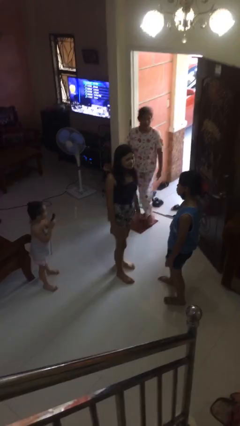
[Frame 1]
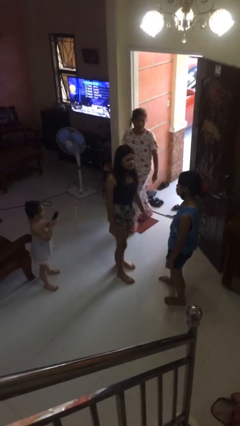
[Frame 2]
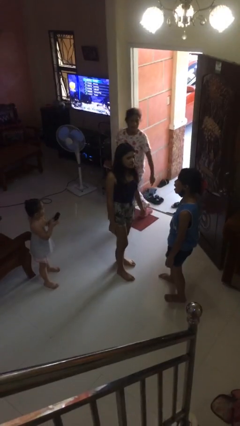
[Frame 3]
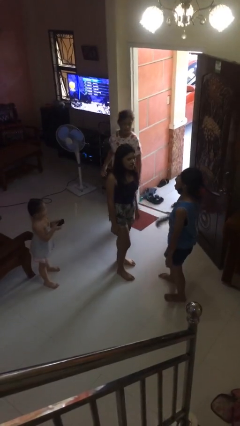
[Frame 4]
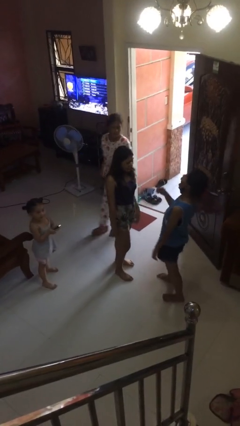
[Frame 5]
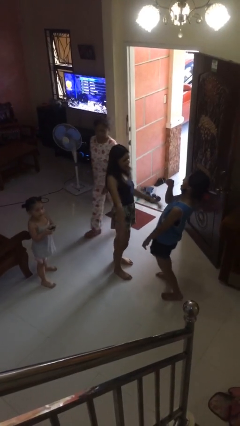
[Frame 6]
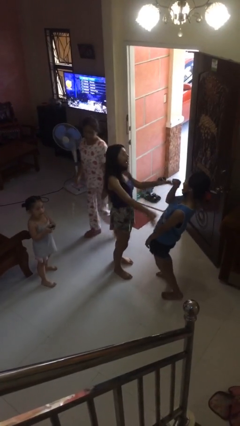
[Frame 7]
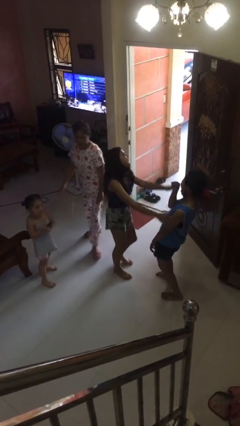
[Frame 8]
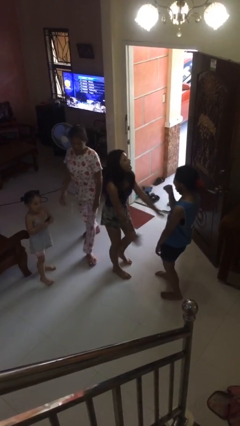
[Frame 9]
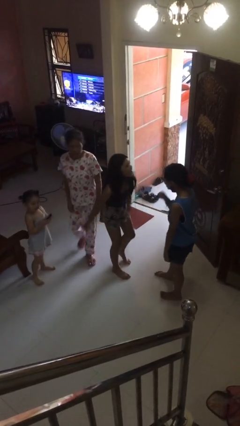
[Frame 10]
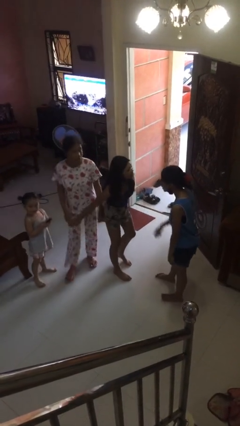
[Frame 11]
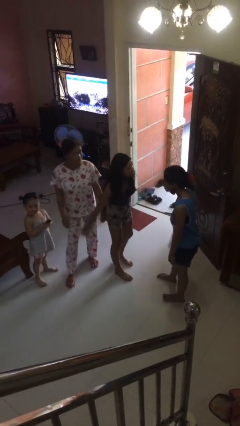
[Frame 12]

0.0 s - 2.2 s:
person laughs with person

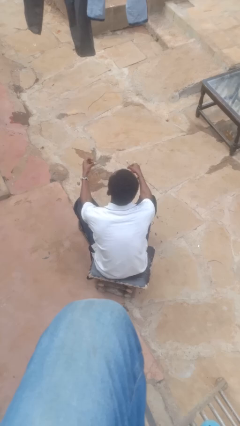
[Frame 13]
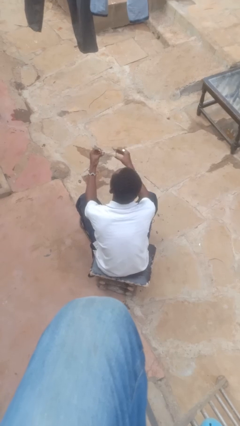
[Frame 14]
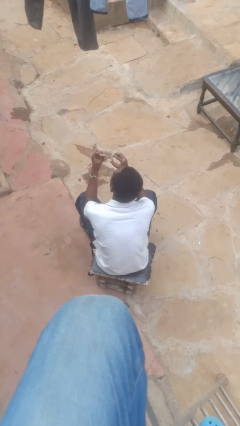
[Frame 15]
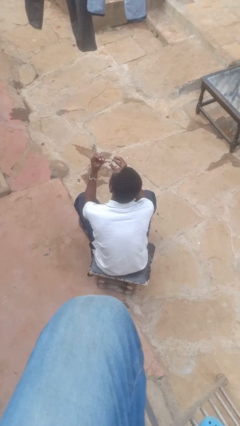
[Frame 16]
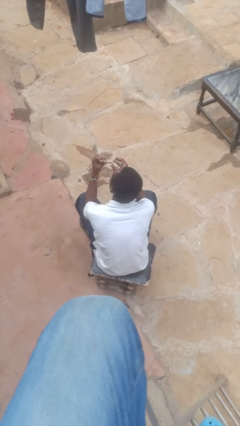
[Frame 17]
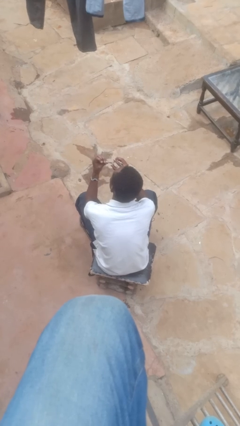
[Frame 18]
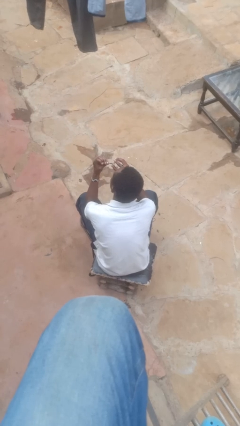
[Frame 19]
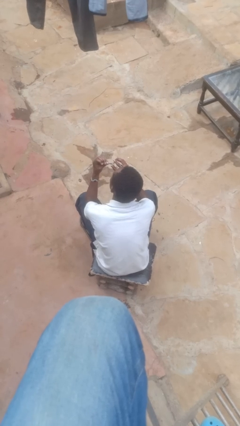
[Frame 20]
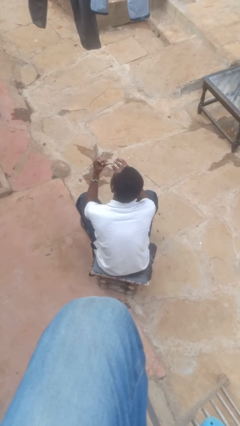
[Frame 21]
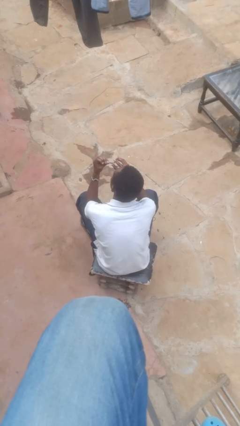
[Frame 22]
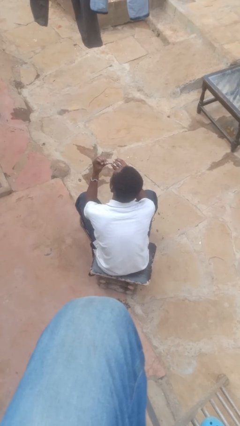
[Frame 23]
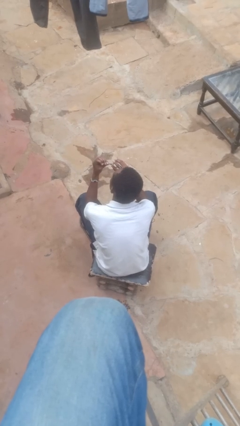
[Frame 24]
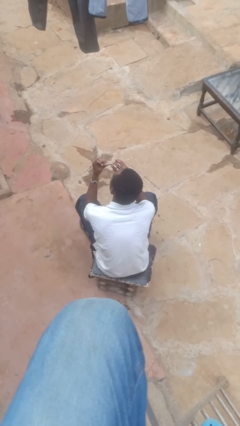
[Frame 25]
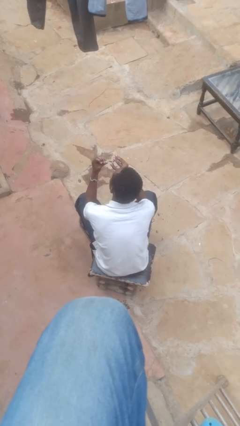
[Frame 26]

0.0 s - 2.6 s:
person clips fingernails

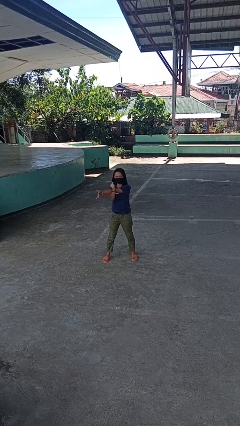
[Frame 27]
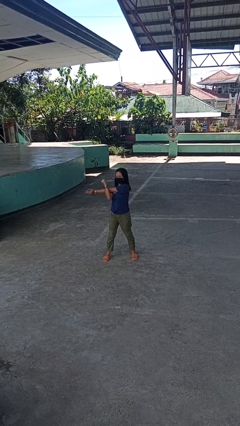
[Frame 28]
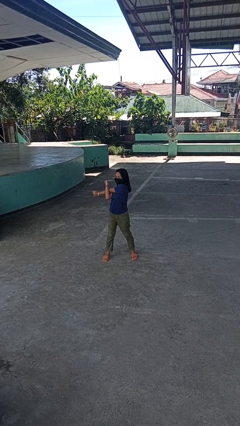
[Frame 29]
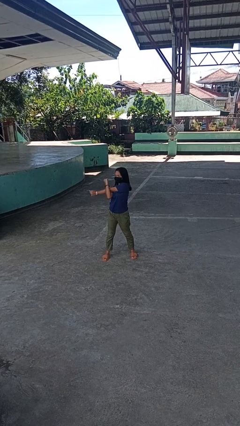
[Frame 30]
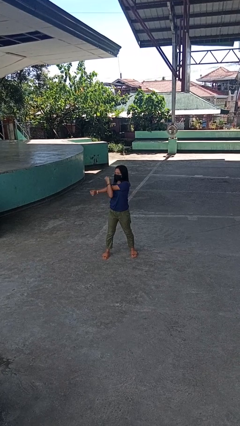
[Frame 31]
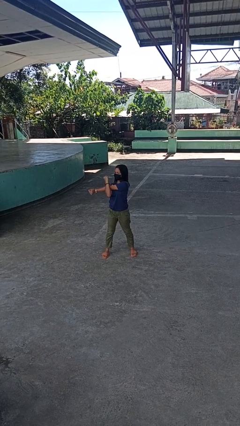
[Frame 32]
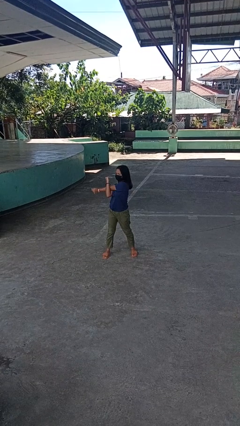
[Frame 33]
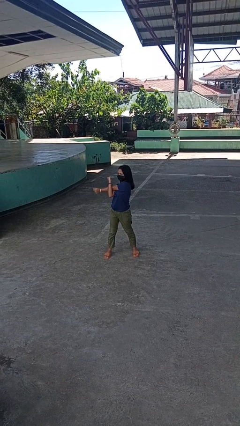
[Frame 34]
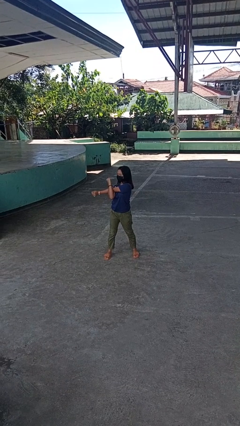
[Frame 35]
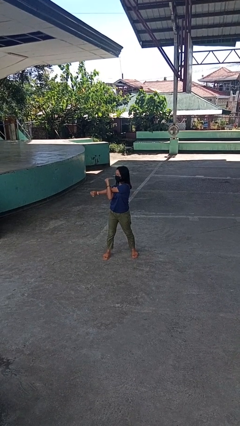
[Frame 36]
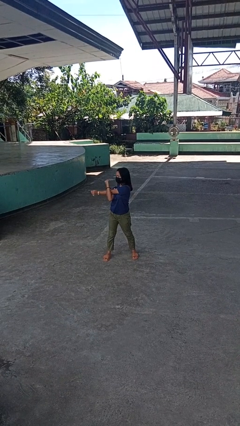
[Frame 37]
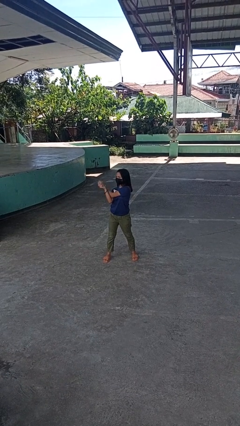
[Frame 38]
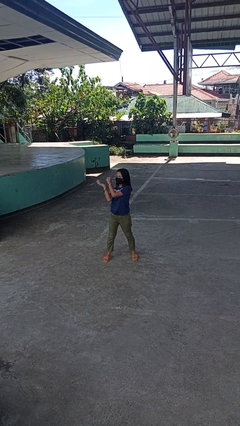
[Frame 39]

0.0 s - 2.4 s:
person stretches back

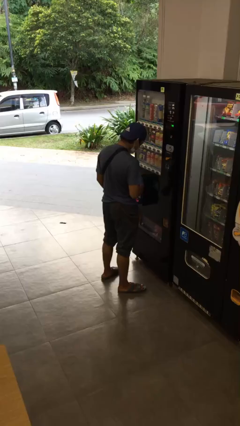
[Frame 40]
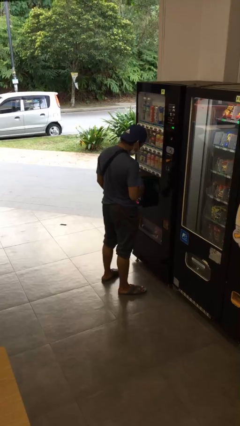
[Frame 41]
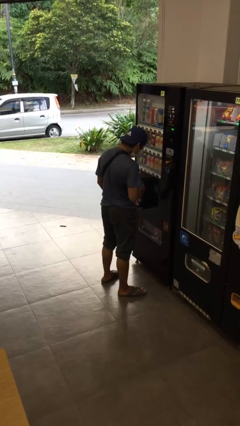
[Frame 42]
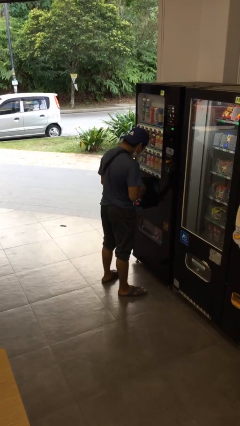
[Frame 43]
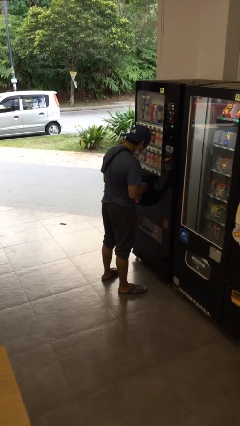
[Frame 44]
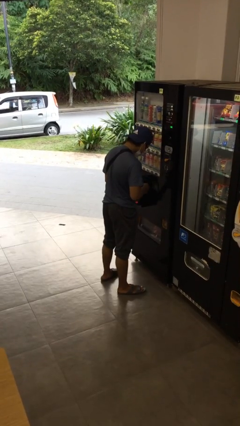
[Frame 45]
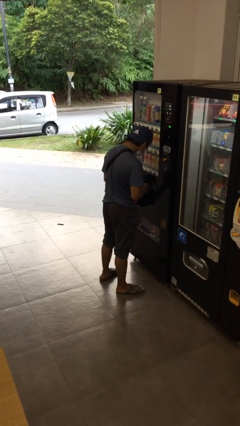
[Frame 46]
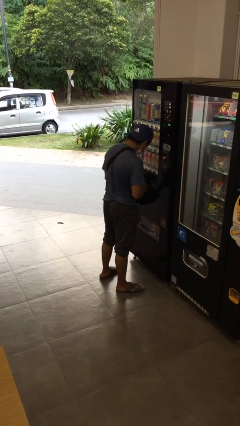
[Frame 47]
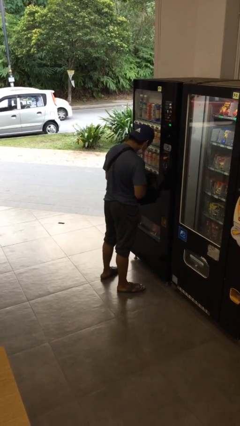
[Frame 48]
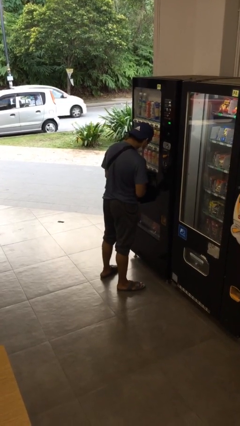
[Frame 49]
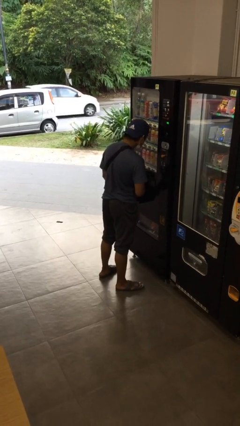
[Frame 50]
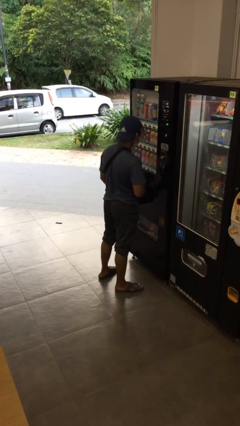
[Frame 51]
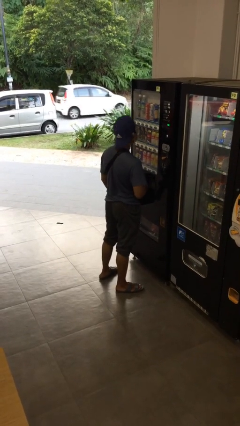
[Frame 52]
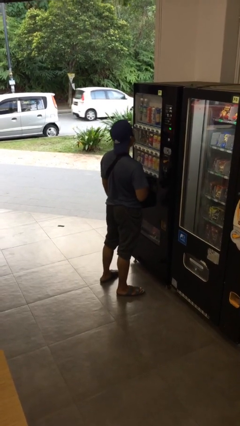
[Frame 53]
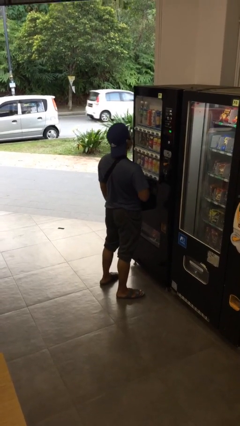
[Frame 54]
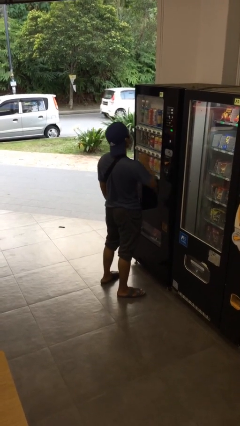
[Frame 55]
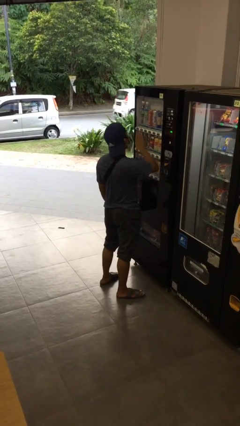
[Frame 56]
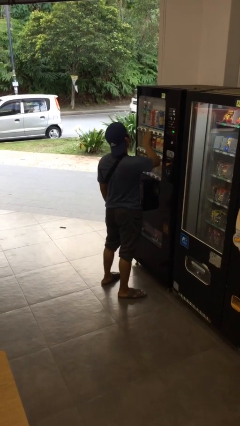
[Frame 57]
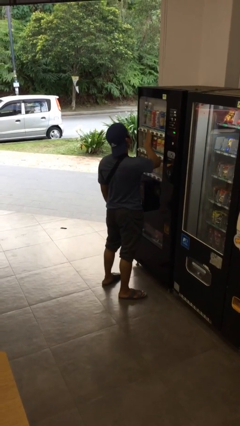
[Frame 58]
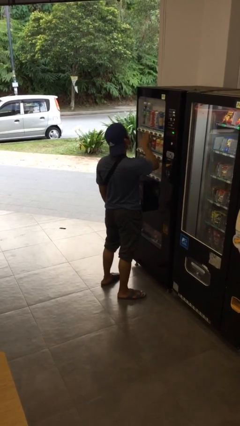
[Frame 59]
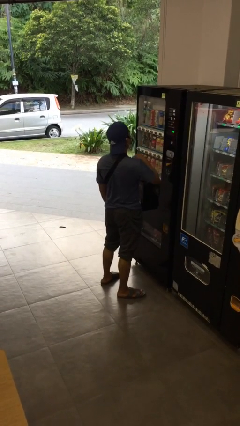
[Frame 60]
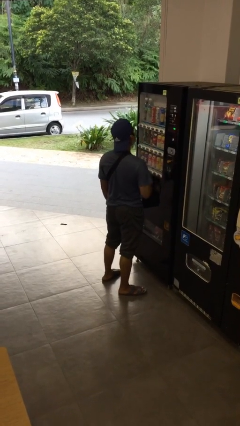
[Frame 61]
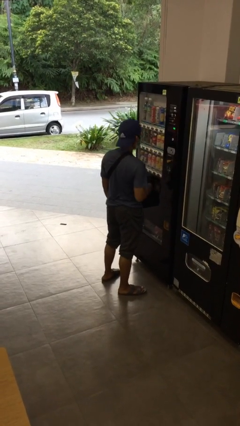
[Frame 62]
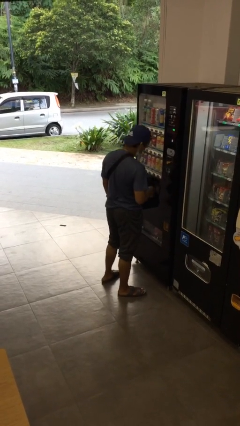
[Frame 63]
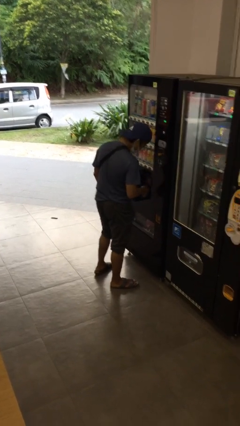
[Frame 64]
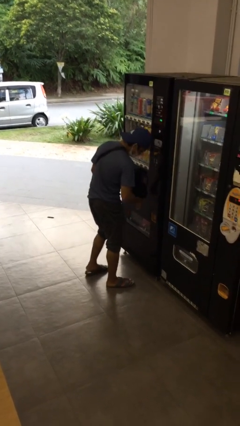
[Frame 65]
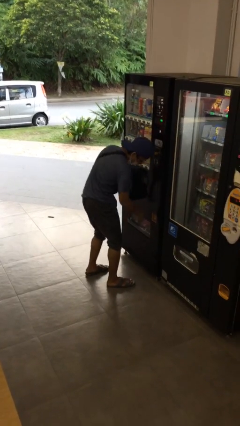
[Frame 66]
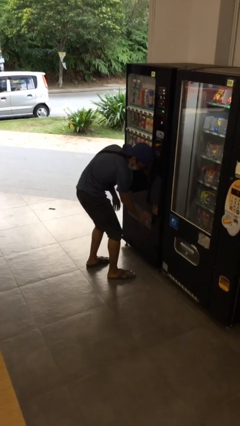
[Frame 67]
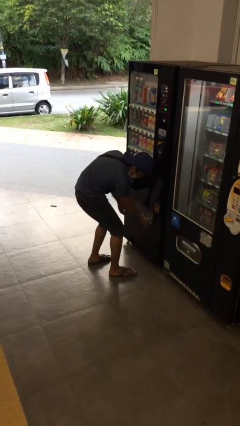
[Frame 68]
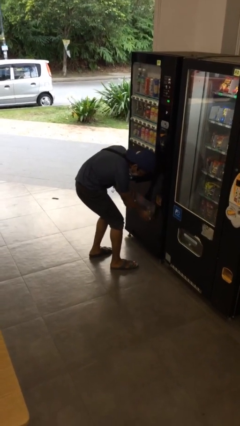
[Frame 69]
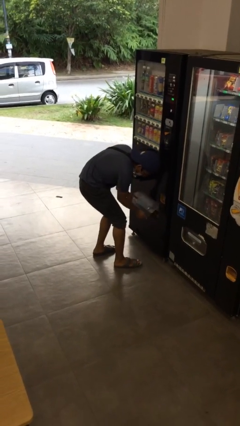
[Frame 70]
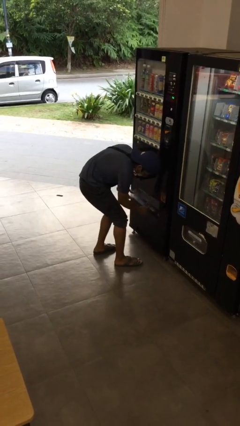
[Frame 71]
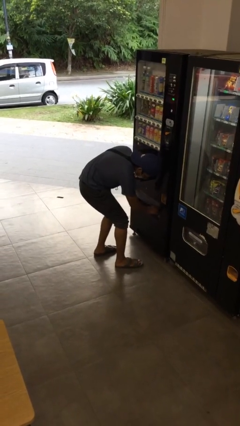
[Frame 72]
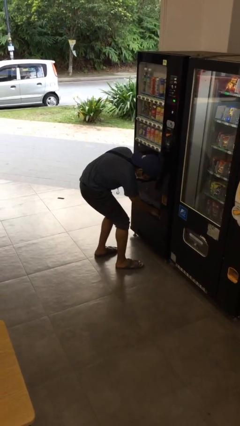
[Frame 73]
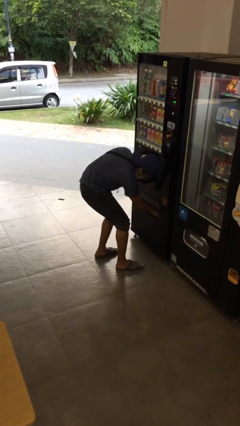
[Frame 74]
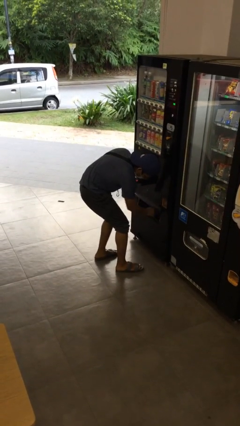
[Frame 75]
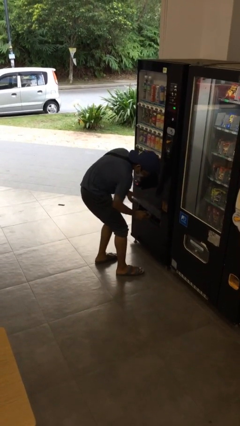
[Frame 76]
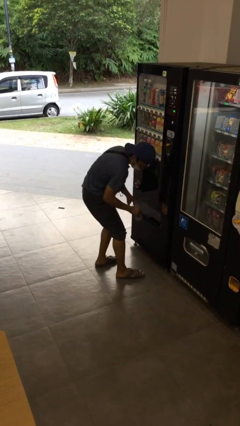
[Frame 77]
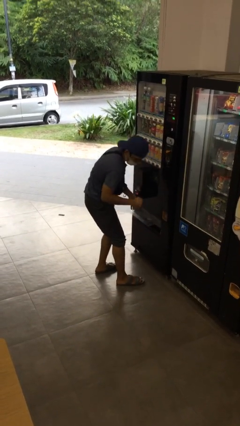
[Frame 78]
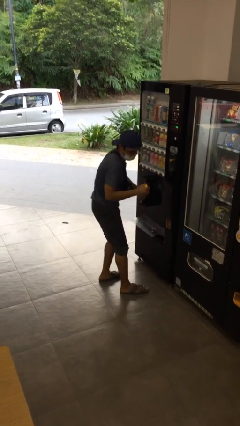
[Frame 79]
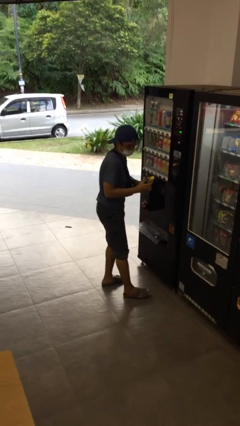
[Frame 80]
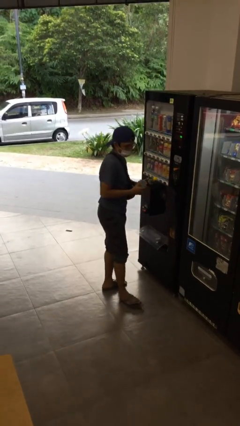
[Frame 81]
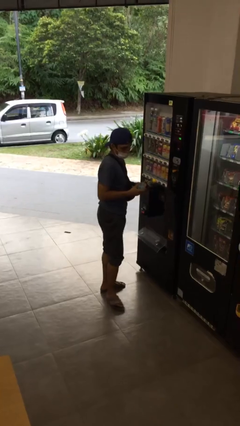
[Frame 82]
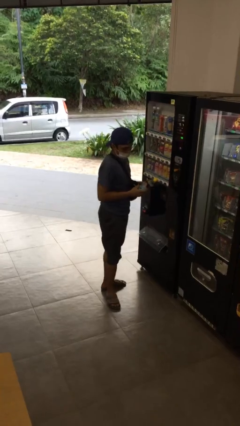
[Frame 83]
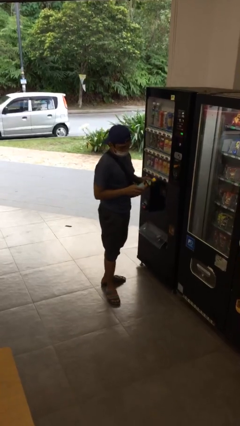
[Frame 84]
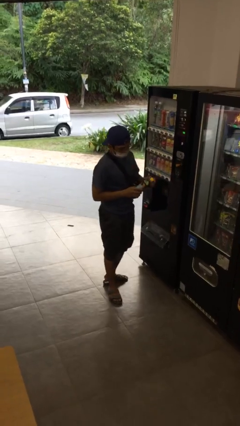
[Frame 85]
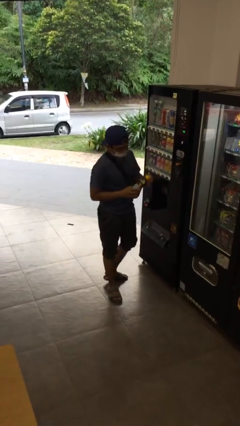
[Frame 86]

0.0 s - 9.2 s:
person purchases from machine

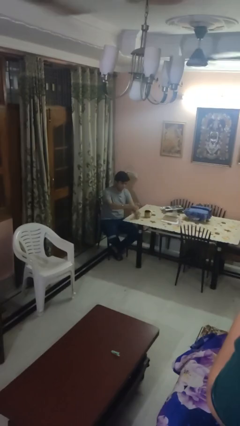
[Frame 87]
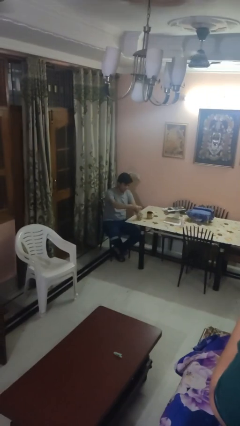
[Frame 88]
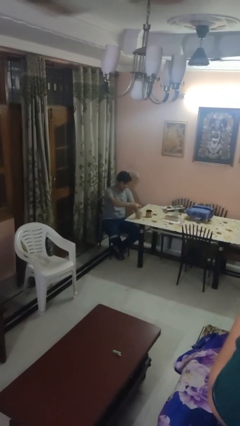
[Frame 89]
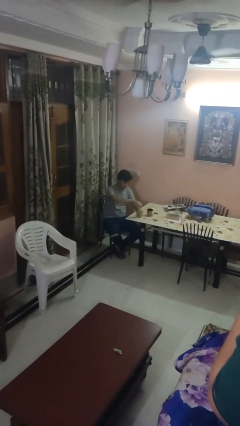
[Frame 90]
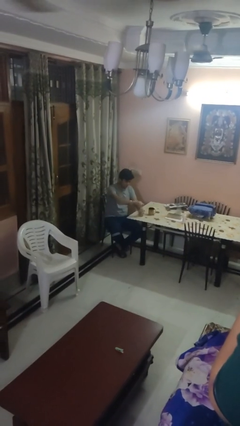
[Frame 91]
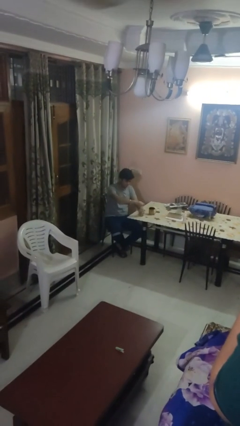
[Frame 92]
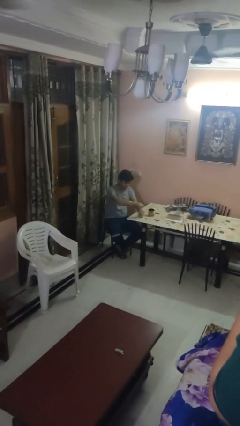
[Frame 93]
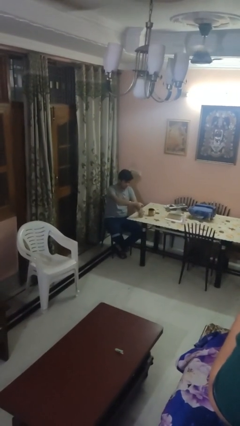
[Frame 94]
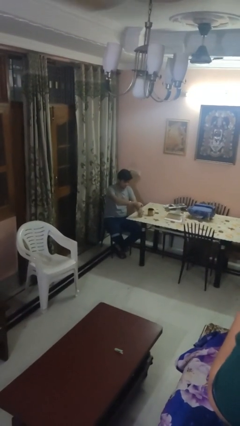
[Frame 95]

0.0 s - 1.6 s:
person screws lid to bottle
